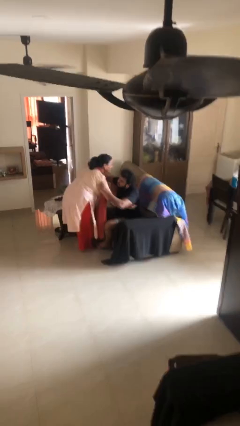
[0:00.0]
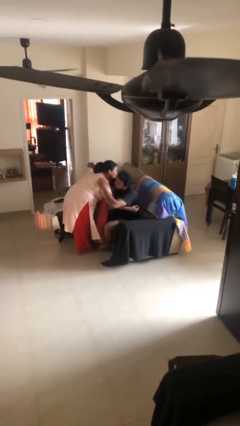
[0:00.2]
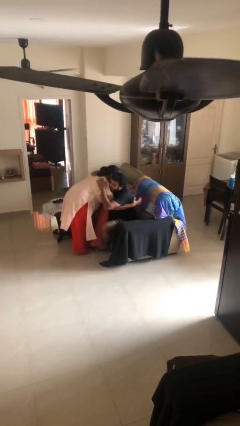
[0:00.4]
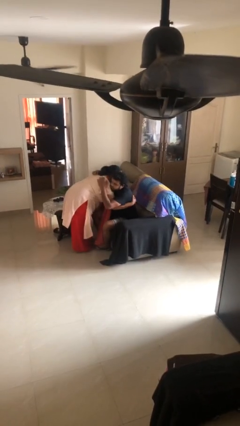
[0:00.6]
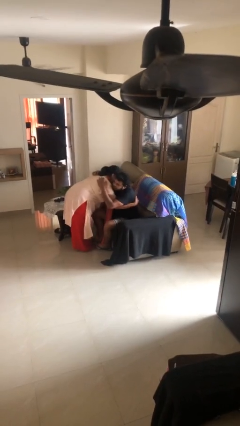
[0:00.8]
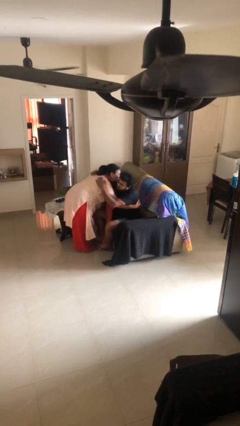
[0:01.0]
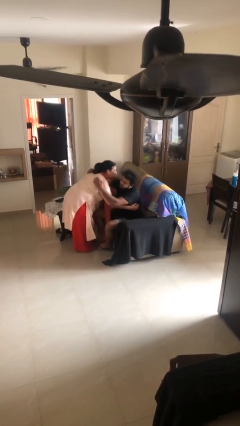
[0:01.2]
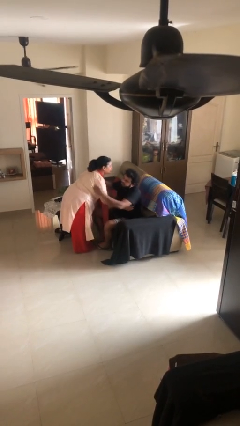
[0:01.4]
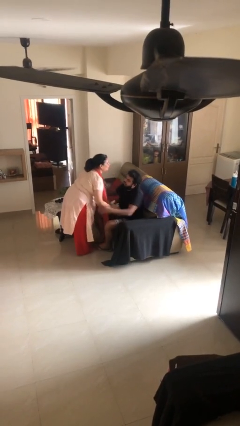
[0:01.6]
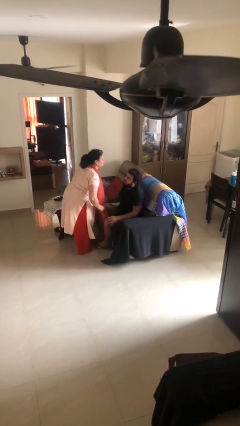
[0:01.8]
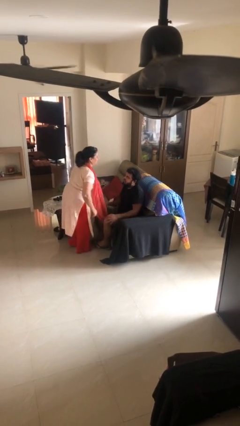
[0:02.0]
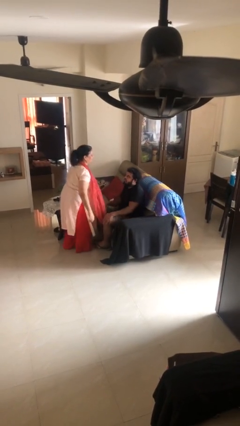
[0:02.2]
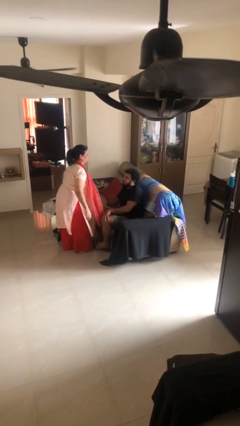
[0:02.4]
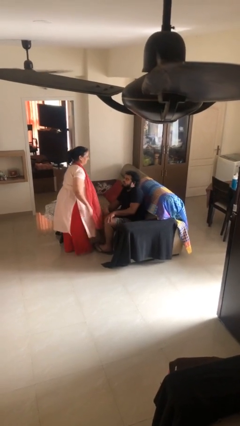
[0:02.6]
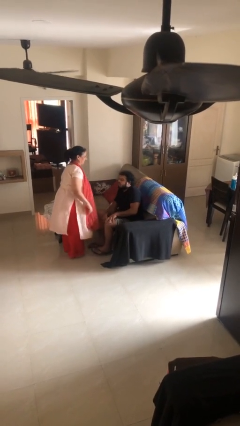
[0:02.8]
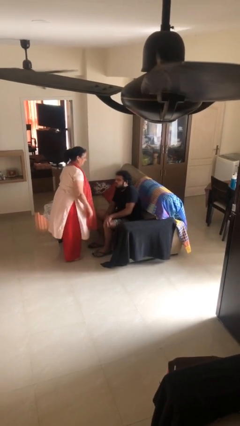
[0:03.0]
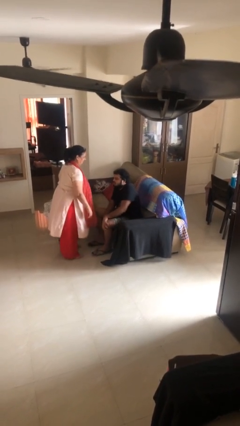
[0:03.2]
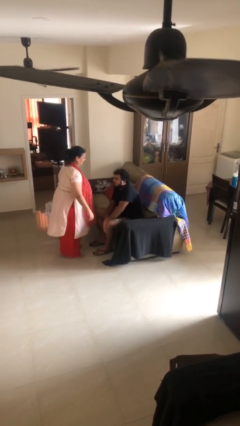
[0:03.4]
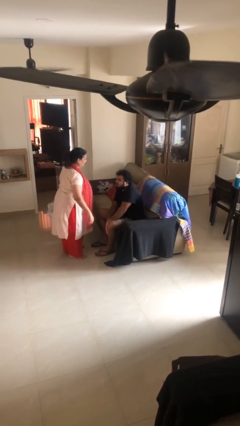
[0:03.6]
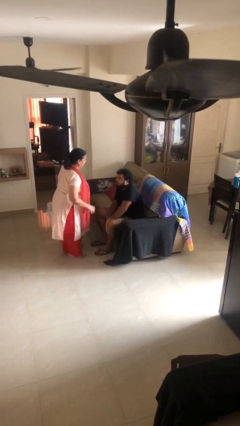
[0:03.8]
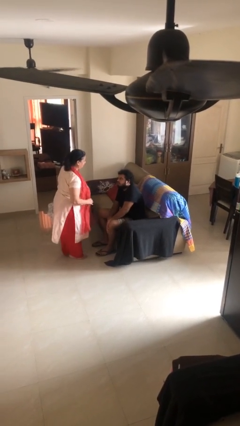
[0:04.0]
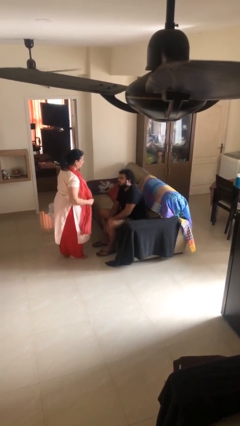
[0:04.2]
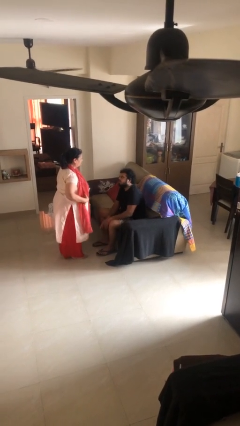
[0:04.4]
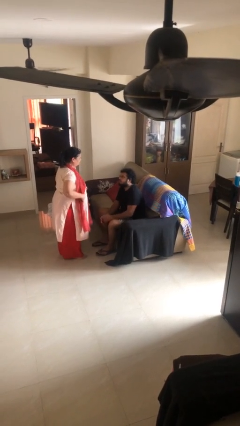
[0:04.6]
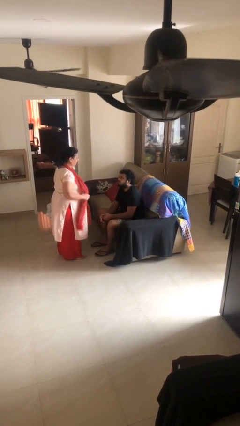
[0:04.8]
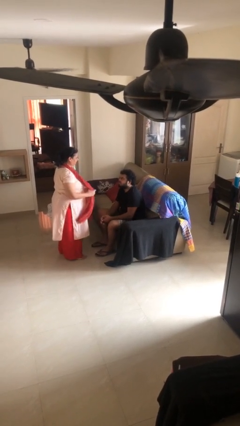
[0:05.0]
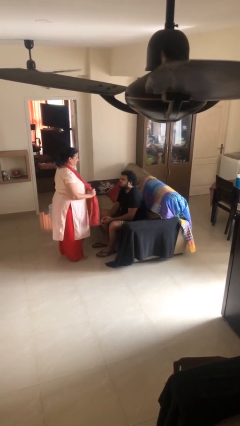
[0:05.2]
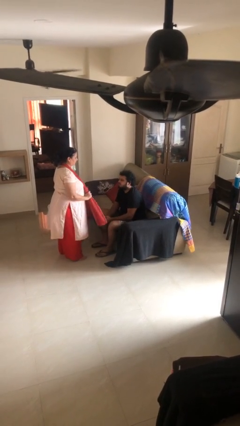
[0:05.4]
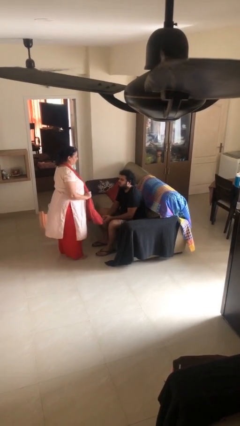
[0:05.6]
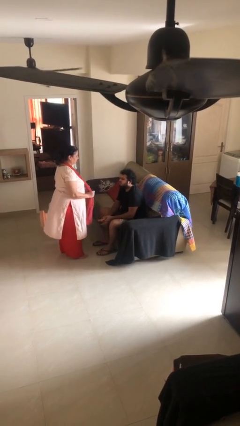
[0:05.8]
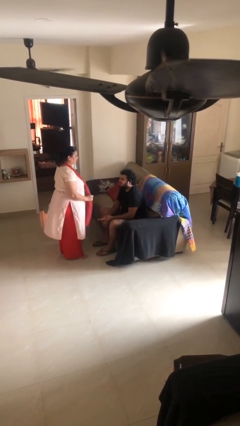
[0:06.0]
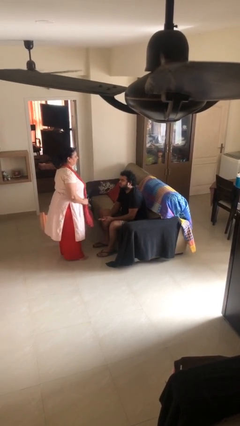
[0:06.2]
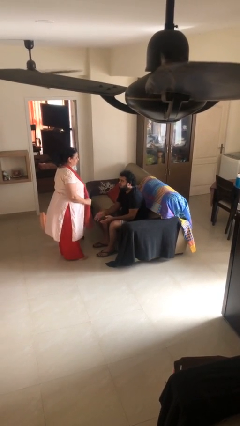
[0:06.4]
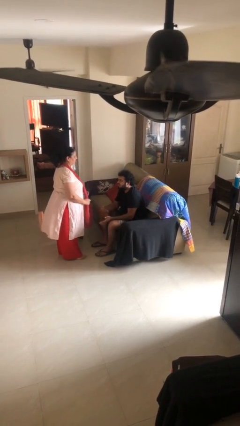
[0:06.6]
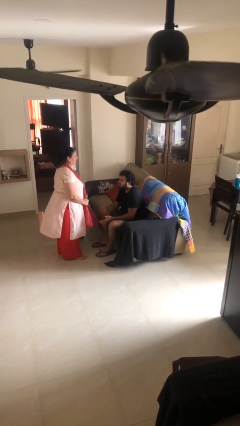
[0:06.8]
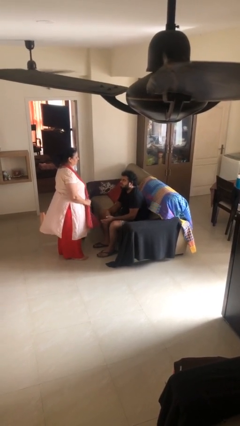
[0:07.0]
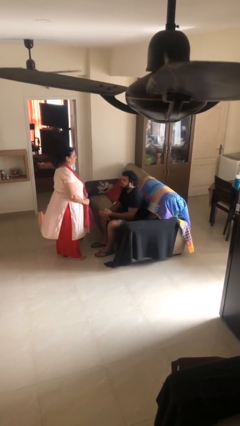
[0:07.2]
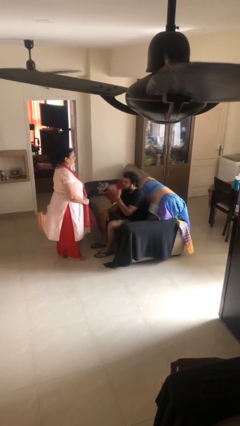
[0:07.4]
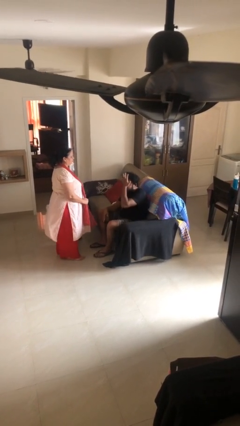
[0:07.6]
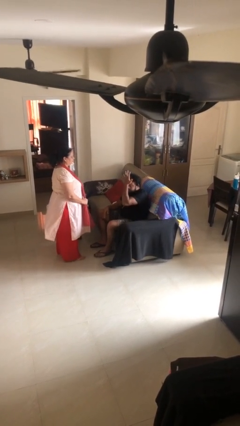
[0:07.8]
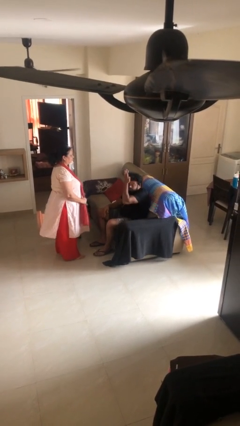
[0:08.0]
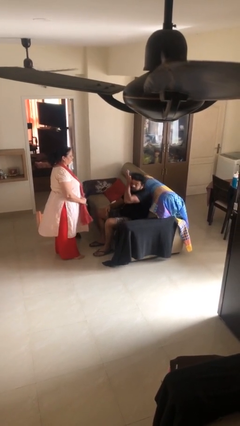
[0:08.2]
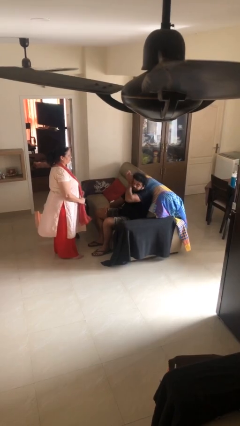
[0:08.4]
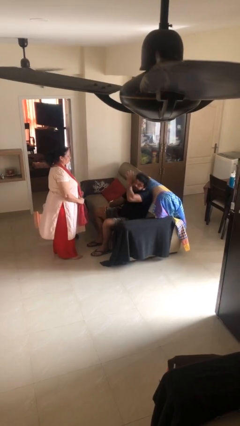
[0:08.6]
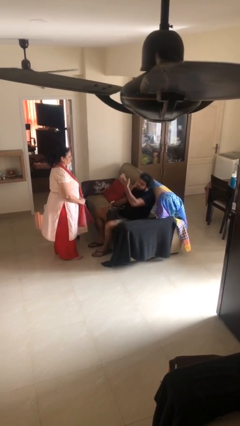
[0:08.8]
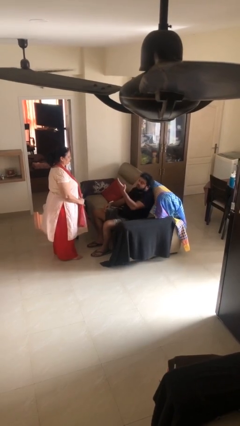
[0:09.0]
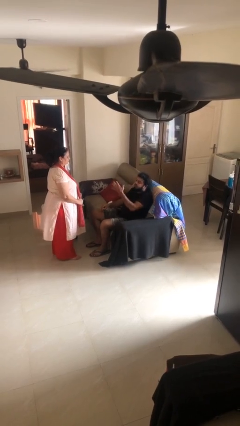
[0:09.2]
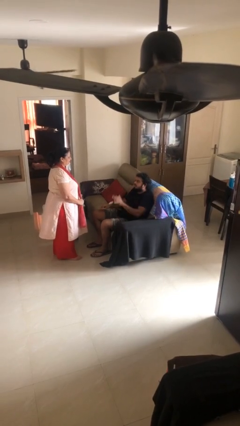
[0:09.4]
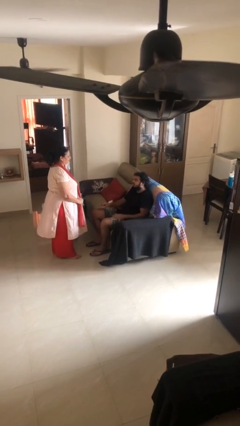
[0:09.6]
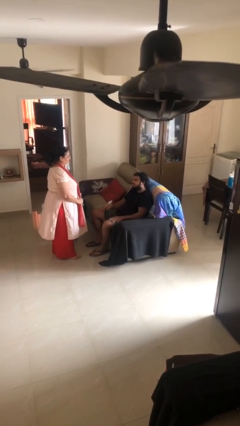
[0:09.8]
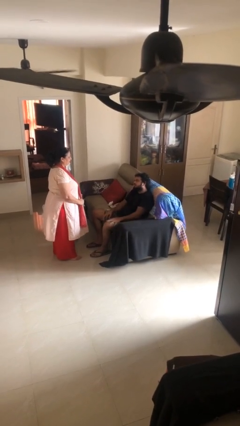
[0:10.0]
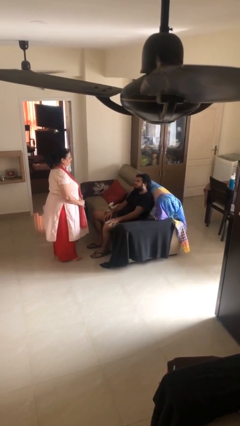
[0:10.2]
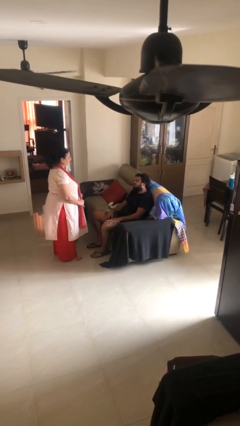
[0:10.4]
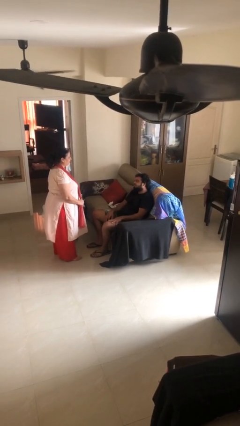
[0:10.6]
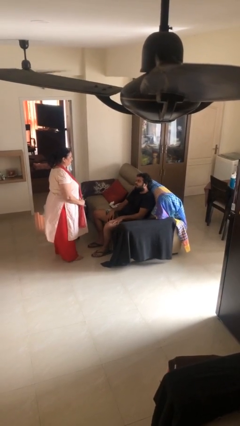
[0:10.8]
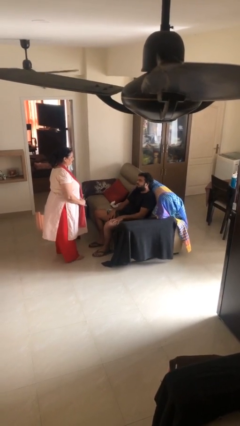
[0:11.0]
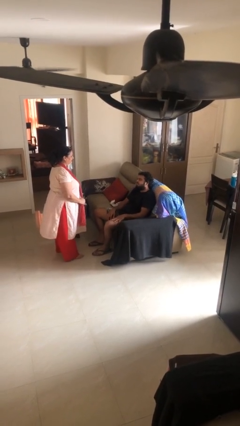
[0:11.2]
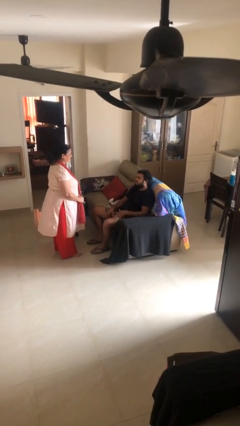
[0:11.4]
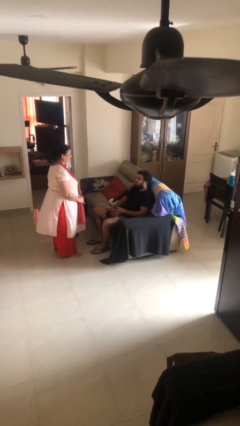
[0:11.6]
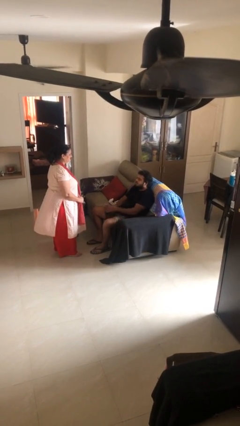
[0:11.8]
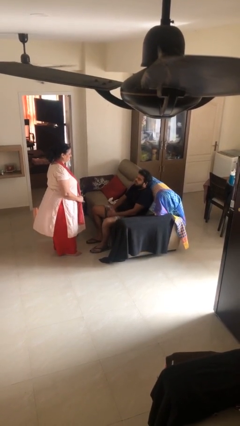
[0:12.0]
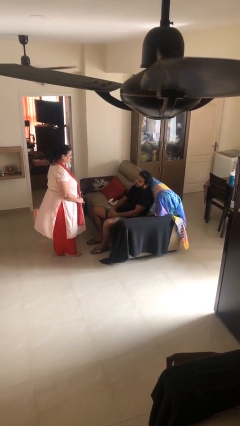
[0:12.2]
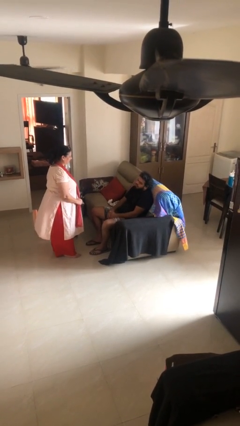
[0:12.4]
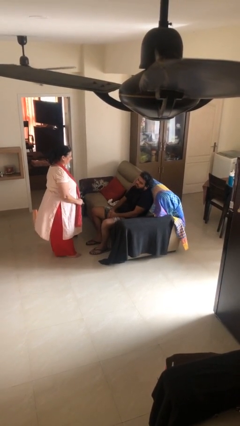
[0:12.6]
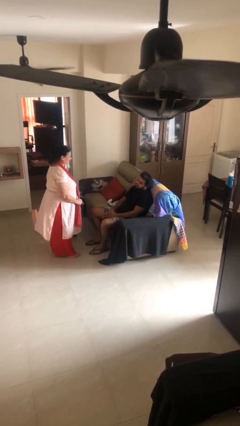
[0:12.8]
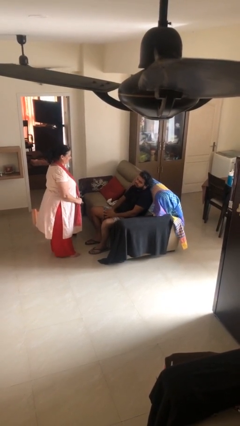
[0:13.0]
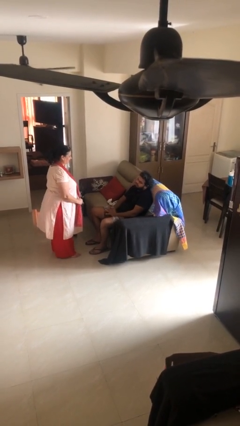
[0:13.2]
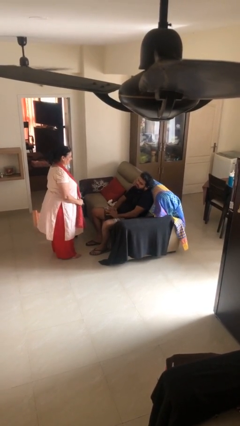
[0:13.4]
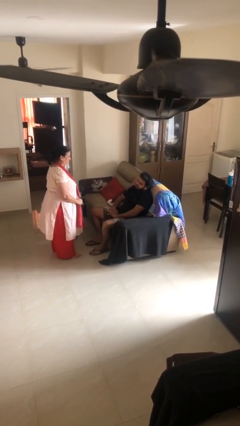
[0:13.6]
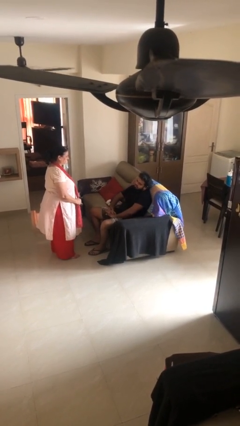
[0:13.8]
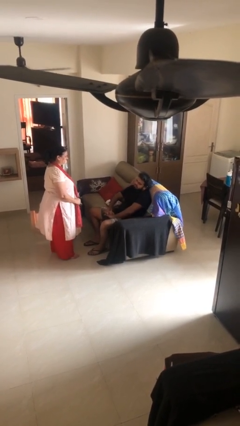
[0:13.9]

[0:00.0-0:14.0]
person embraces person

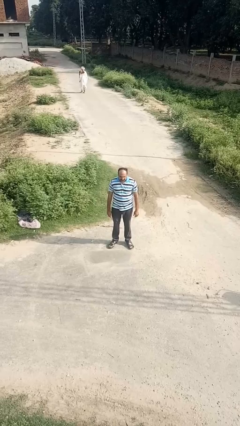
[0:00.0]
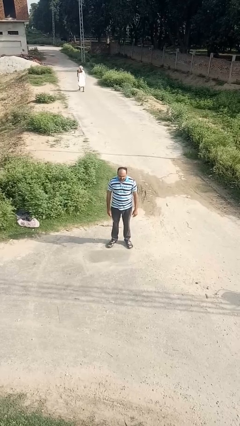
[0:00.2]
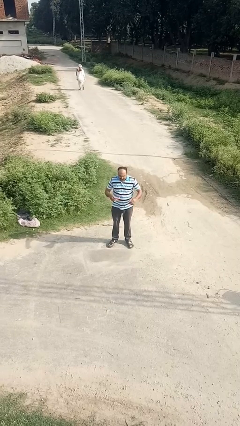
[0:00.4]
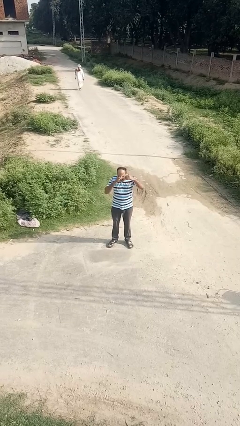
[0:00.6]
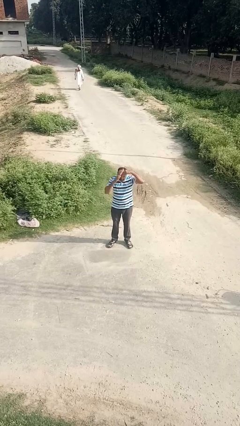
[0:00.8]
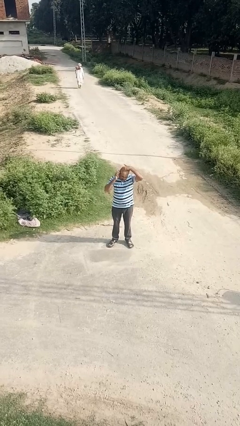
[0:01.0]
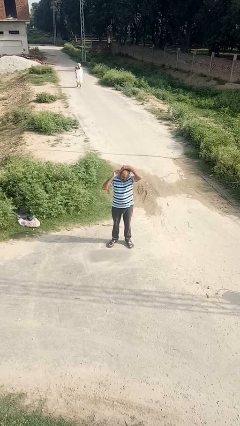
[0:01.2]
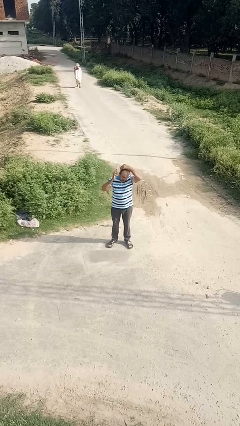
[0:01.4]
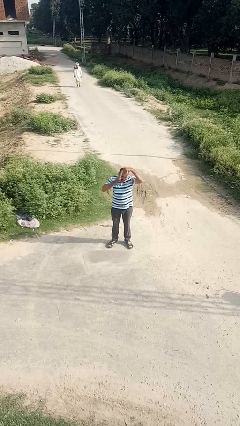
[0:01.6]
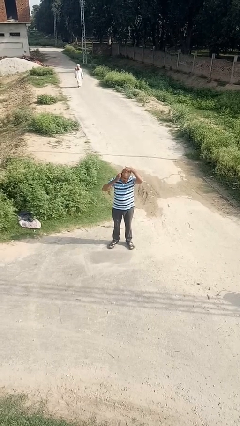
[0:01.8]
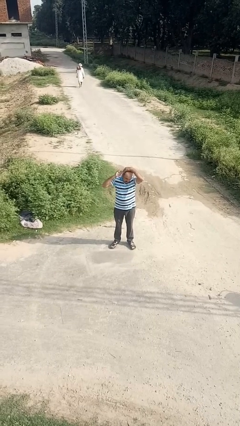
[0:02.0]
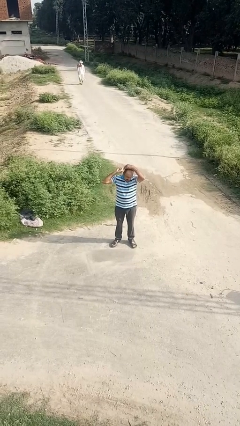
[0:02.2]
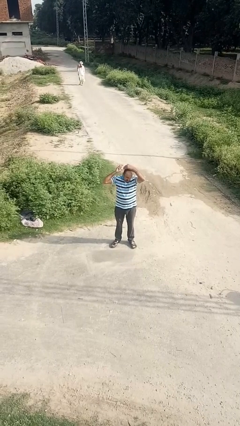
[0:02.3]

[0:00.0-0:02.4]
person brushes hair

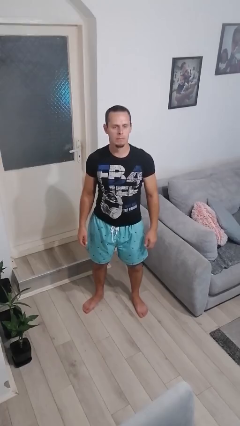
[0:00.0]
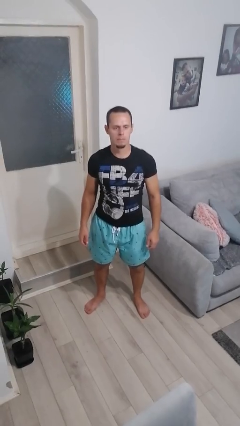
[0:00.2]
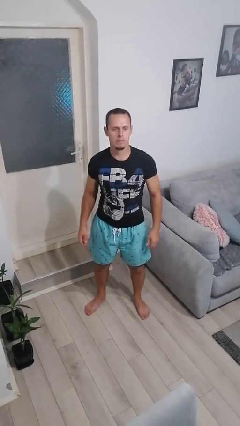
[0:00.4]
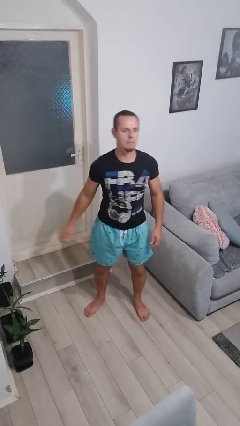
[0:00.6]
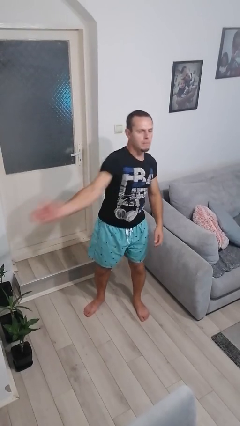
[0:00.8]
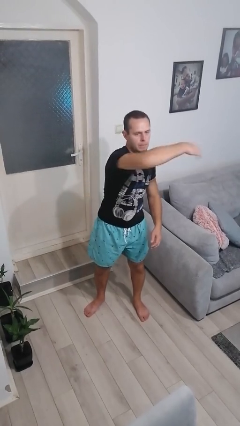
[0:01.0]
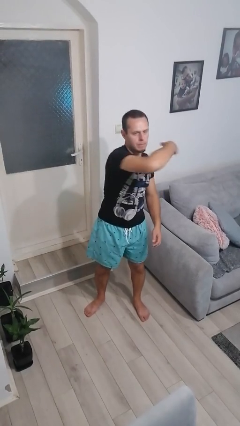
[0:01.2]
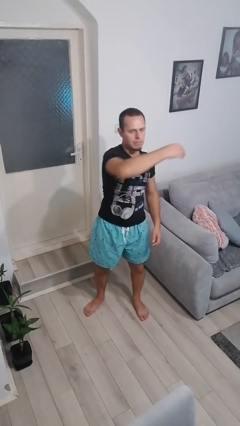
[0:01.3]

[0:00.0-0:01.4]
person punches
